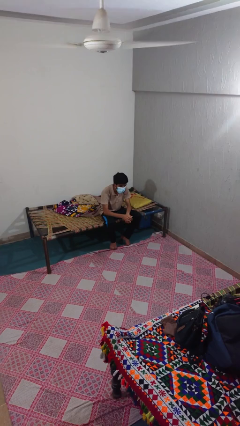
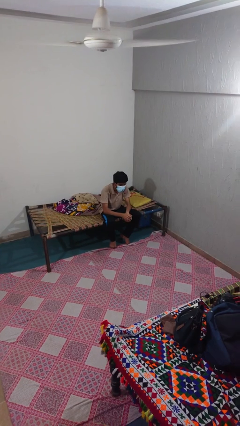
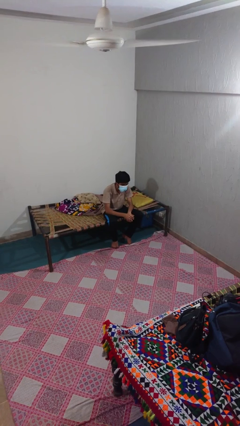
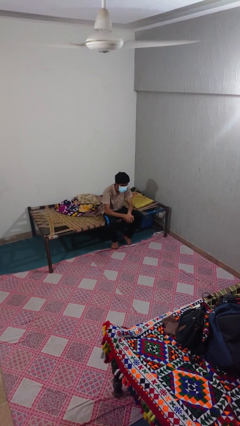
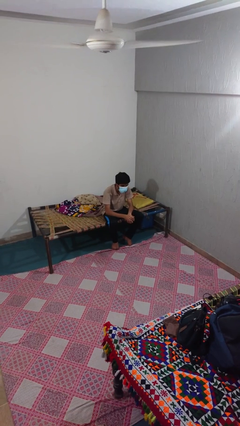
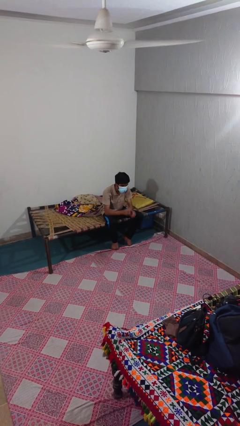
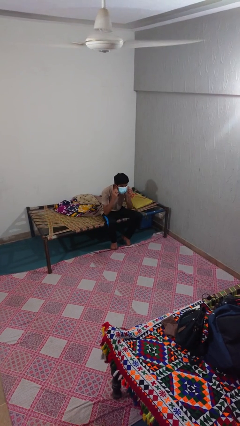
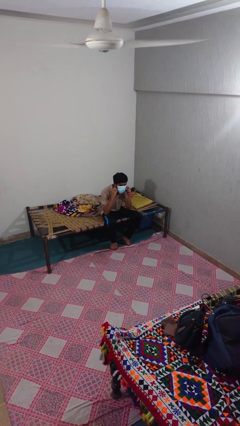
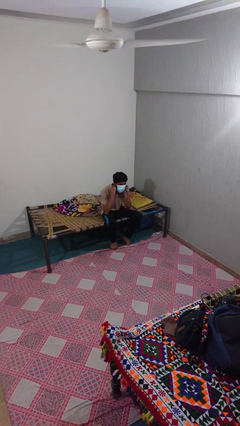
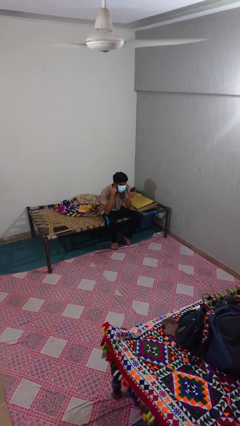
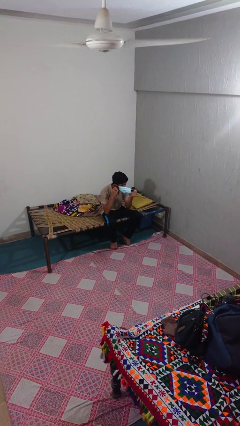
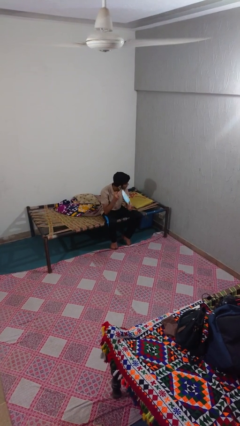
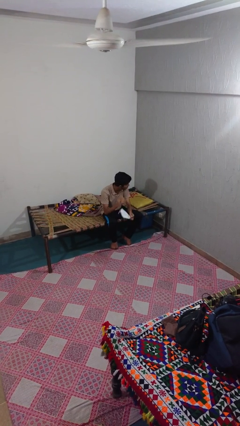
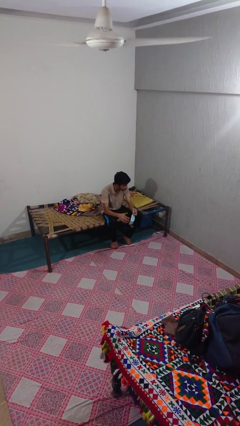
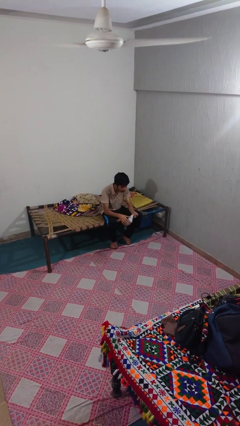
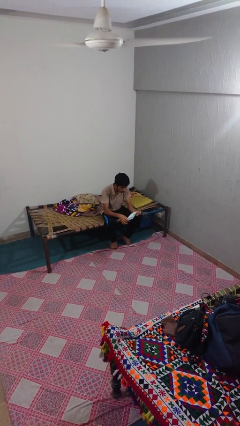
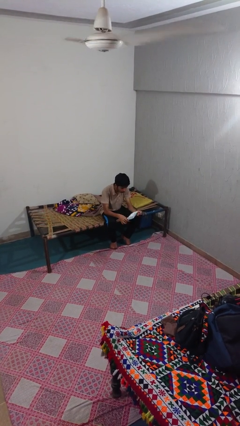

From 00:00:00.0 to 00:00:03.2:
person takes off facemask

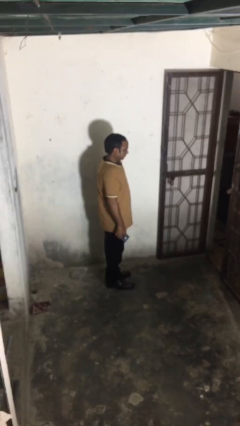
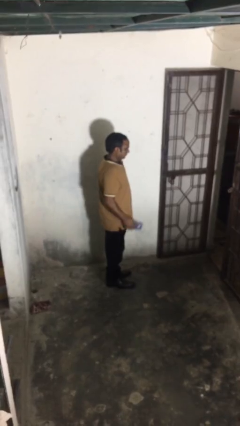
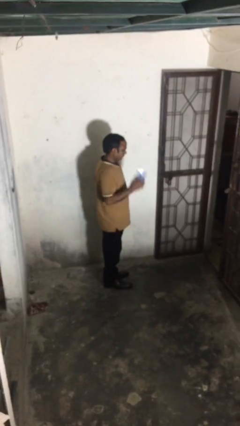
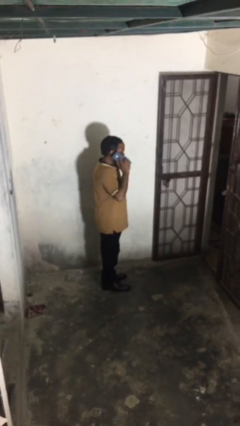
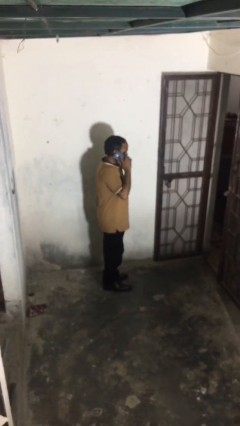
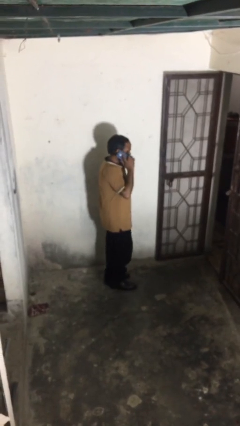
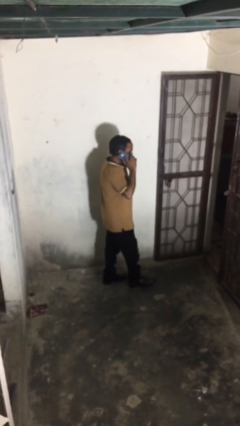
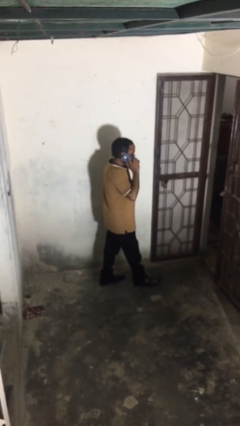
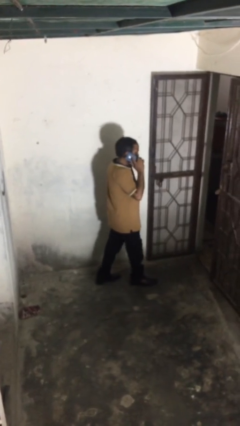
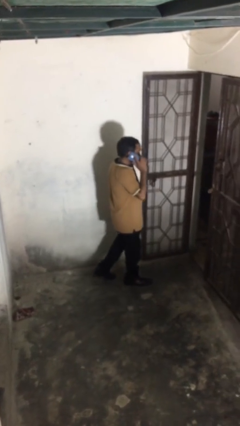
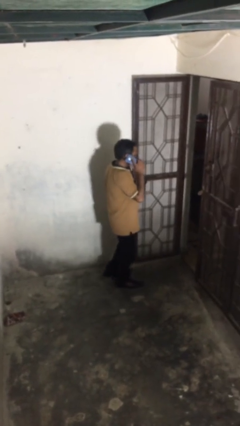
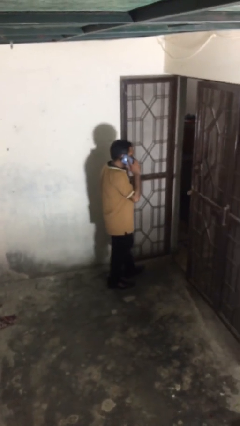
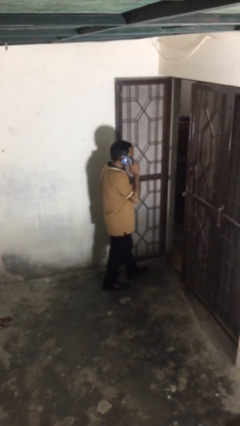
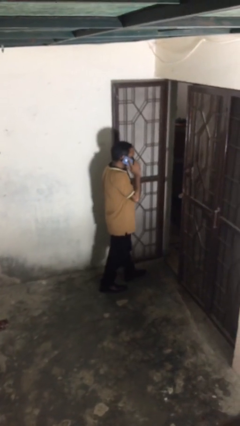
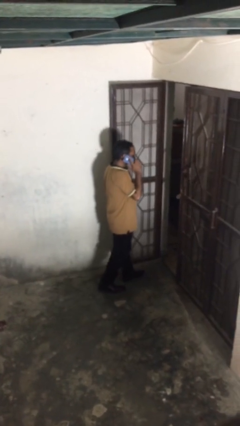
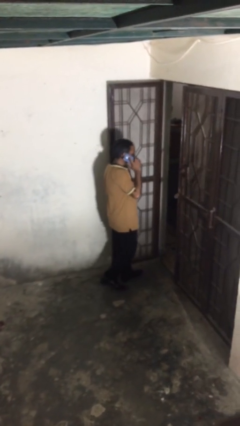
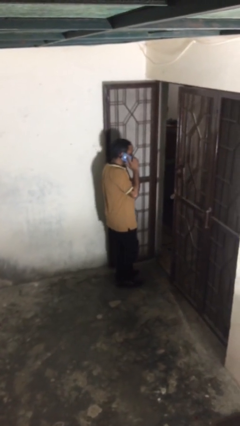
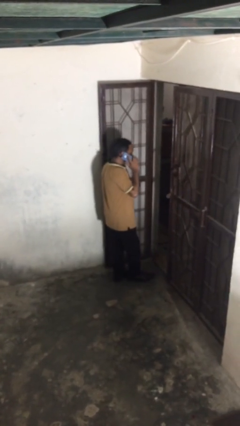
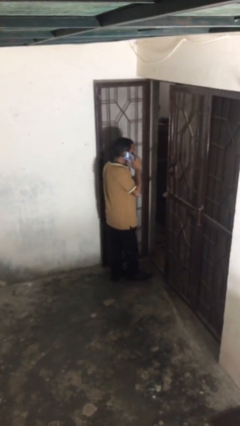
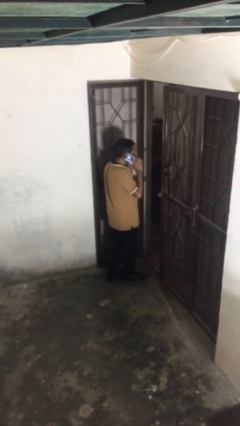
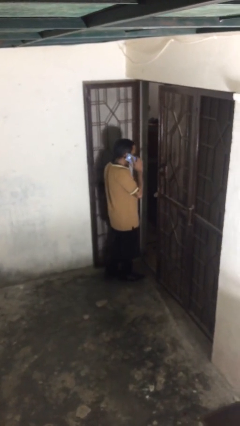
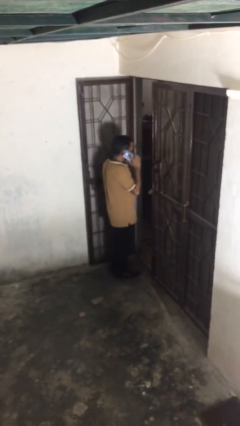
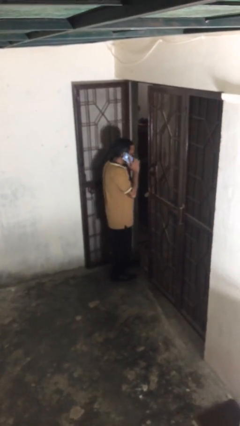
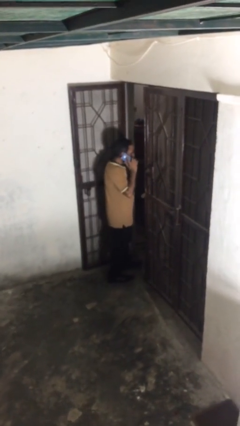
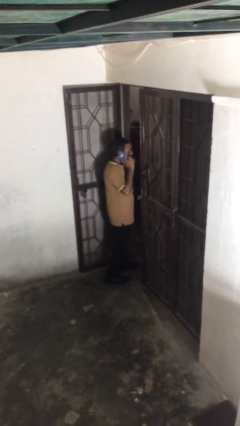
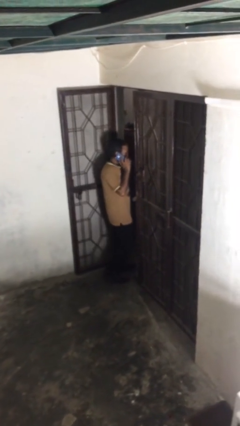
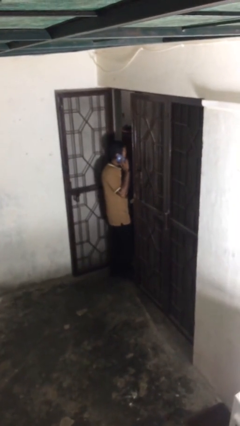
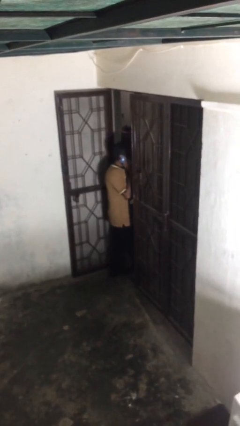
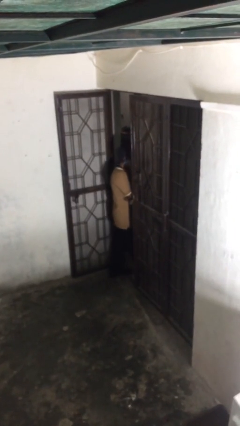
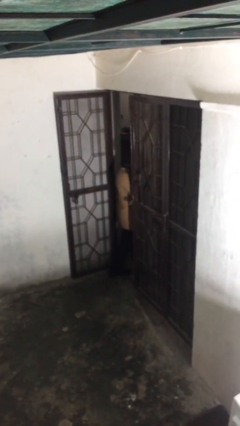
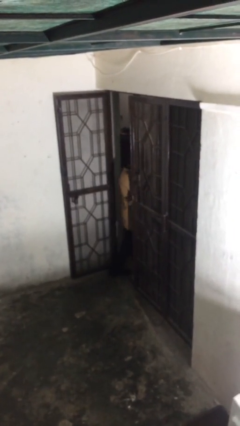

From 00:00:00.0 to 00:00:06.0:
person exits scene through structure

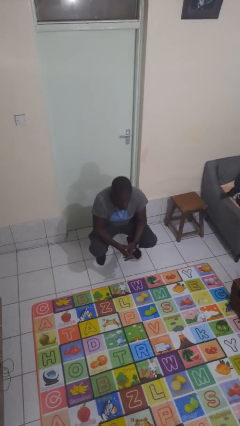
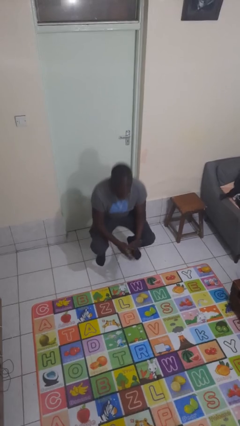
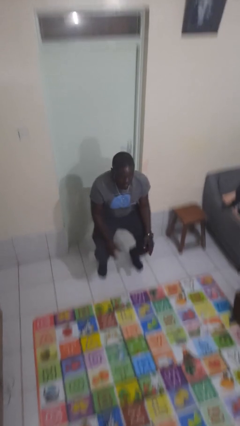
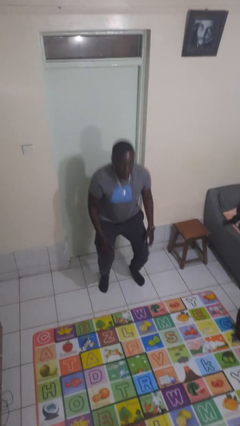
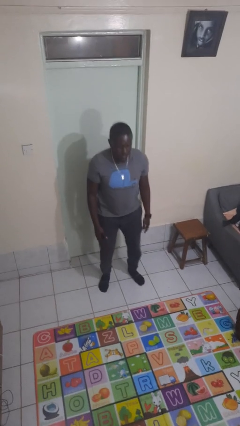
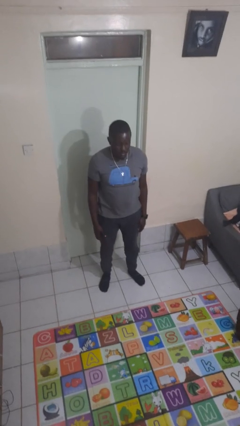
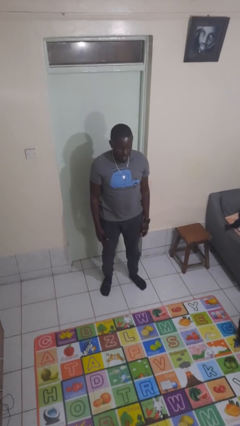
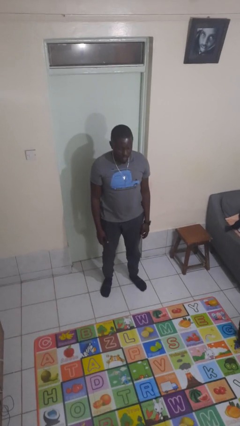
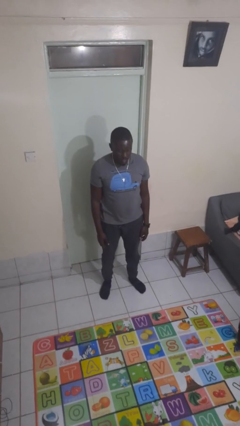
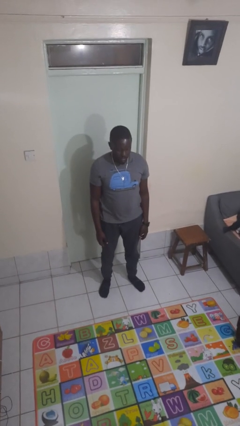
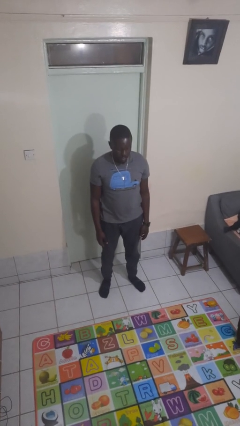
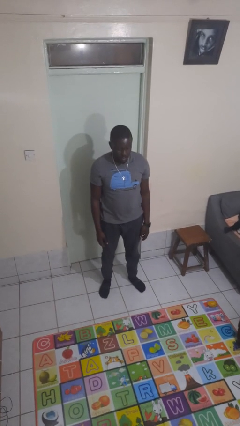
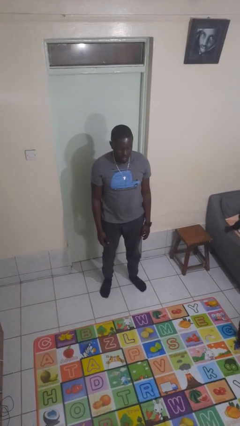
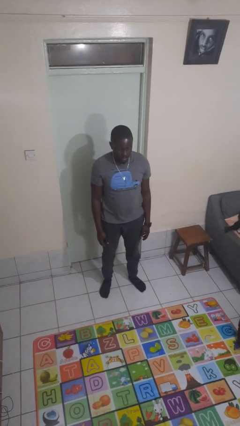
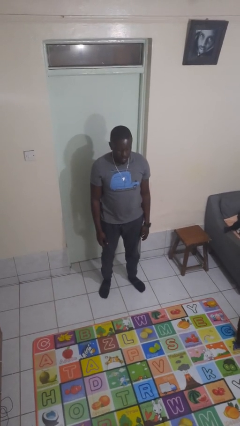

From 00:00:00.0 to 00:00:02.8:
person stands up

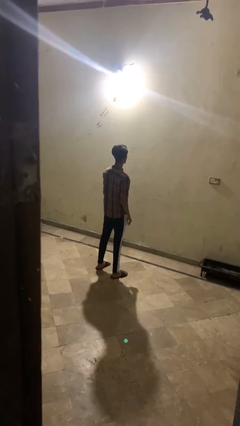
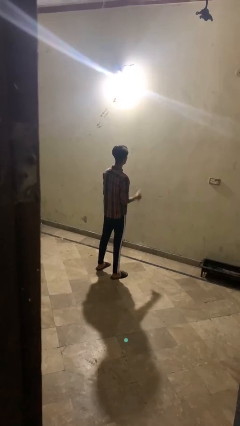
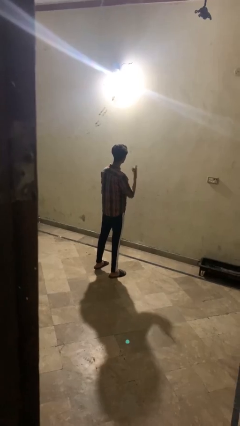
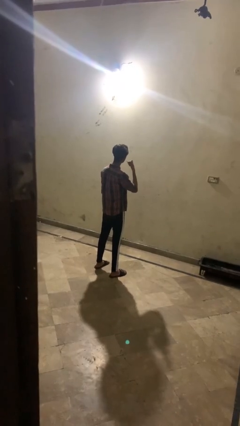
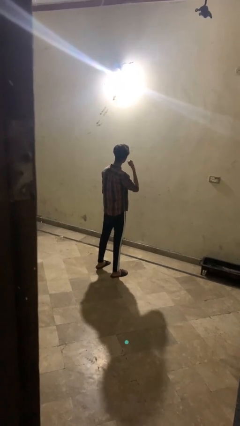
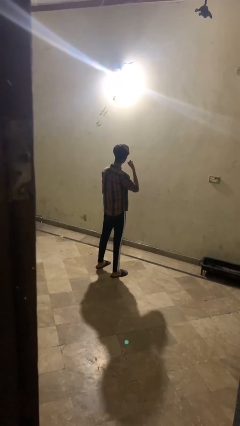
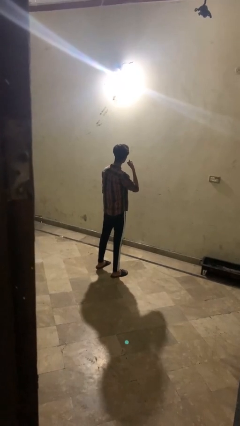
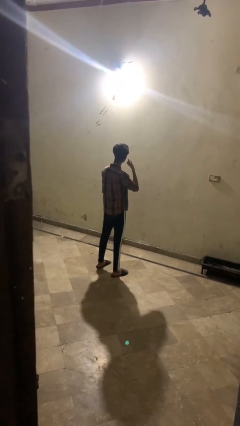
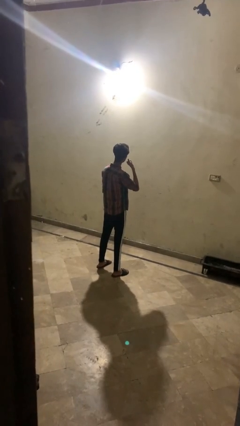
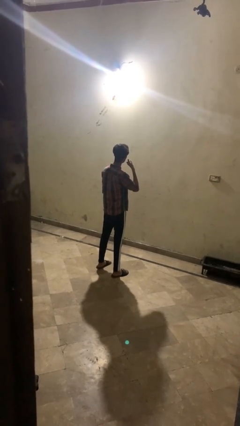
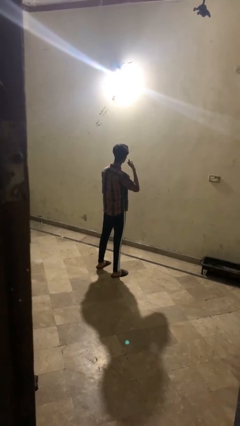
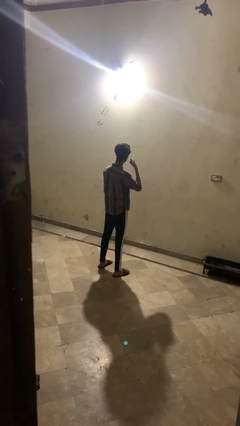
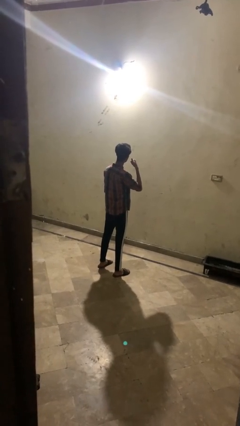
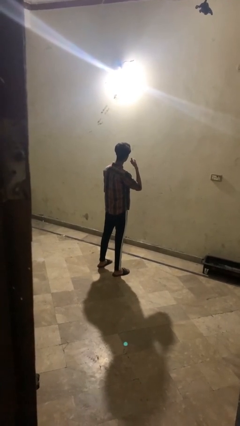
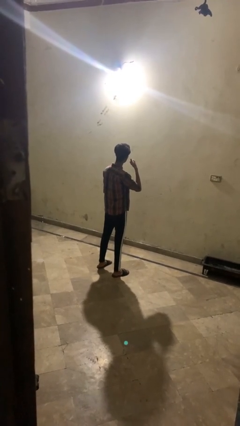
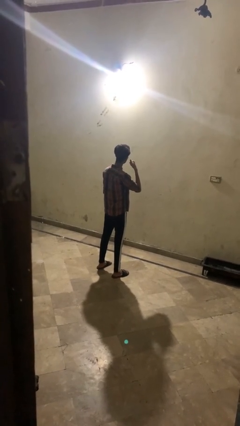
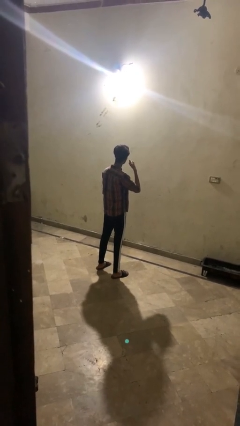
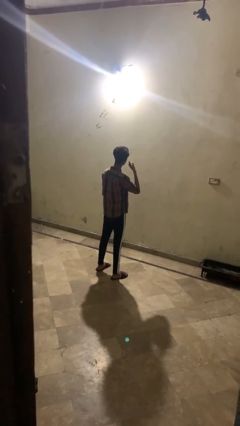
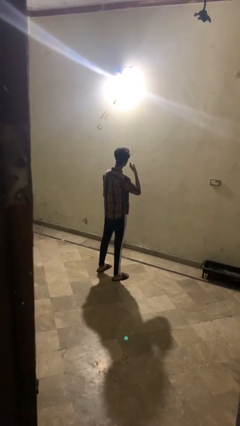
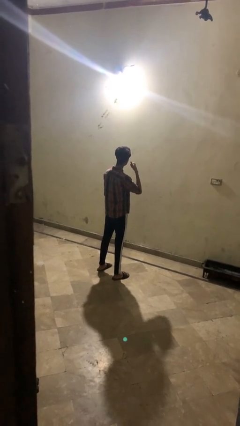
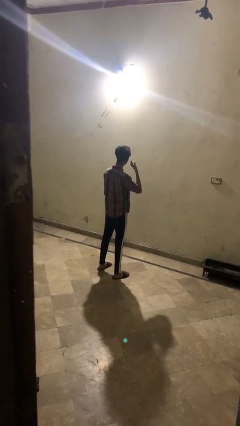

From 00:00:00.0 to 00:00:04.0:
person gestures call me

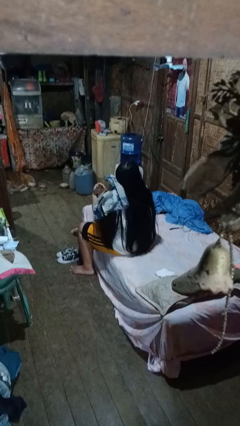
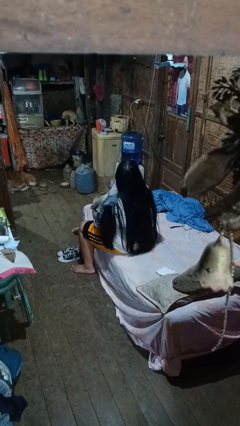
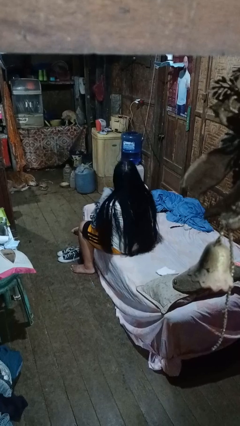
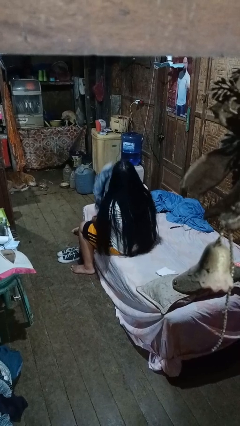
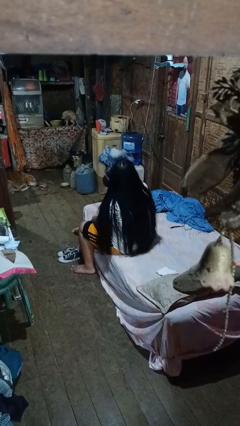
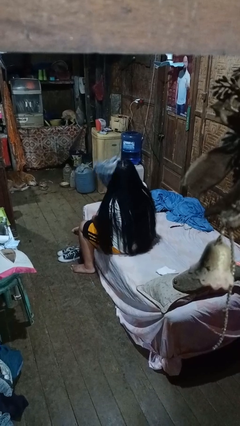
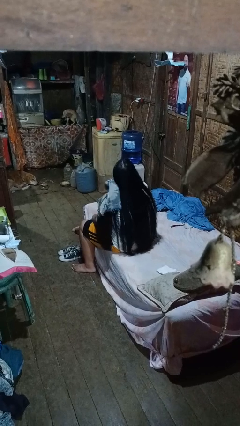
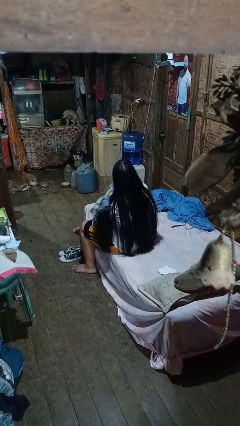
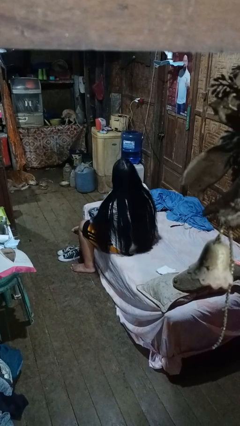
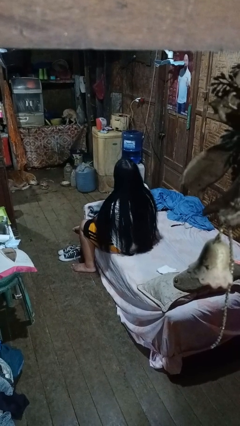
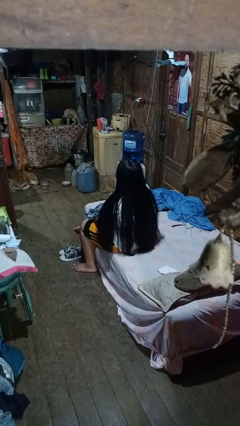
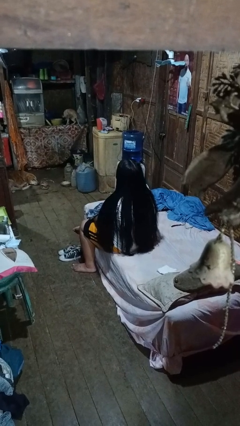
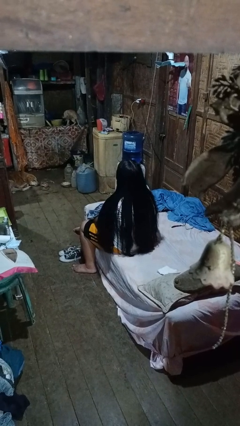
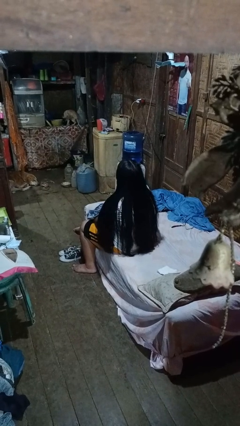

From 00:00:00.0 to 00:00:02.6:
person dries hair with towel
